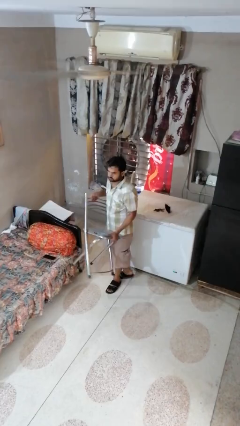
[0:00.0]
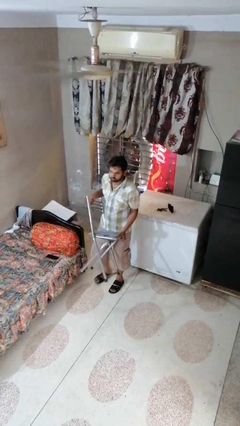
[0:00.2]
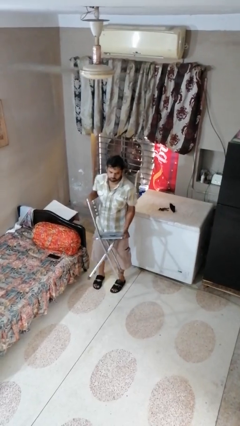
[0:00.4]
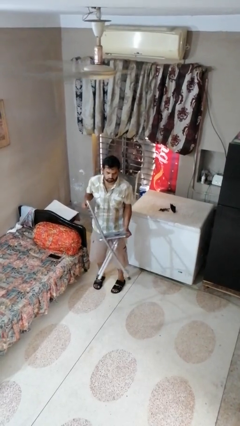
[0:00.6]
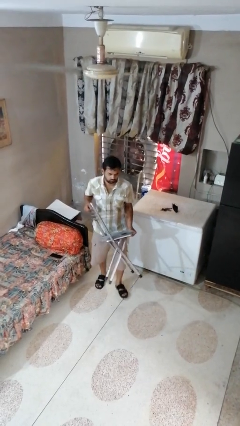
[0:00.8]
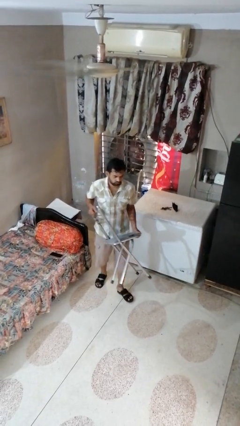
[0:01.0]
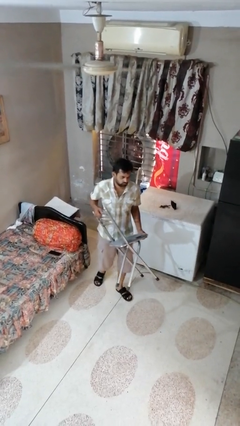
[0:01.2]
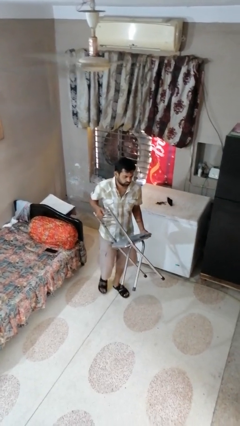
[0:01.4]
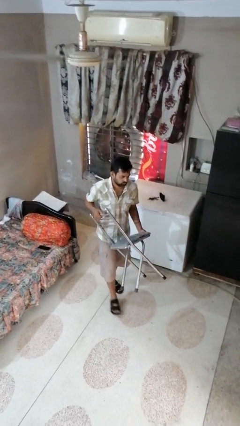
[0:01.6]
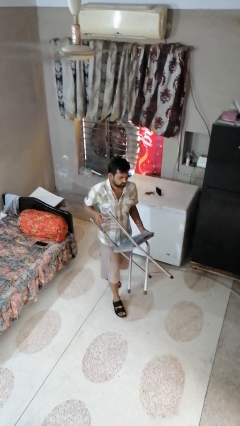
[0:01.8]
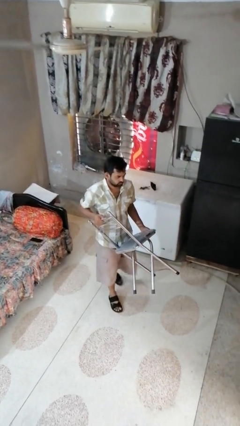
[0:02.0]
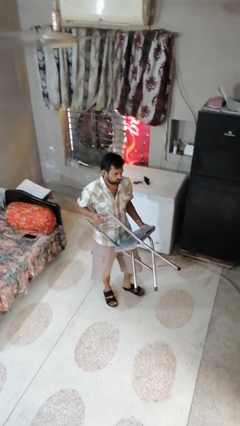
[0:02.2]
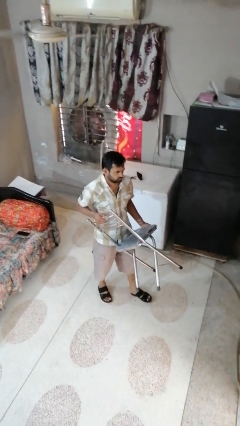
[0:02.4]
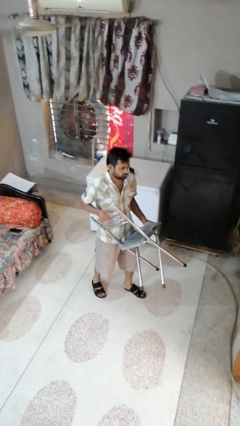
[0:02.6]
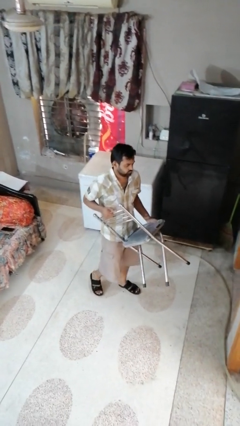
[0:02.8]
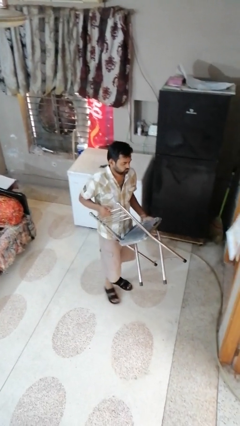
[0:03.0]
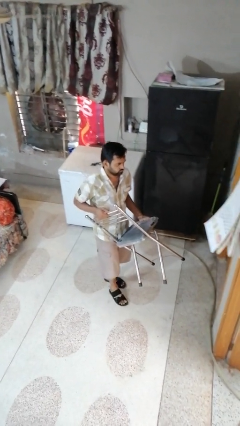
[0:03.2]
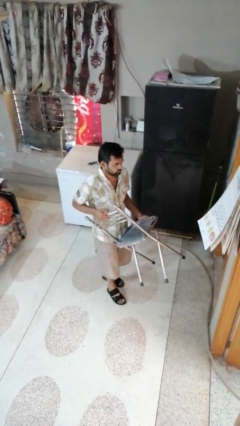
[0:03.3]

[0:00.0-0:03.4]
person carries furniture

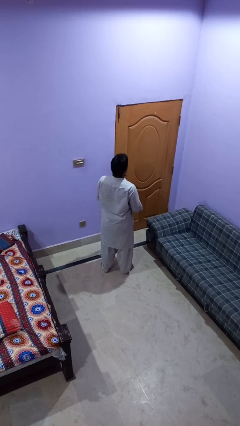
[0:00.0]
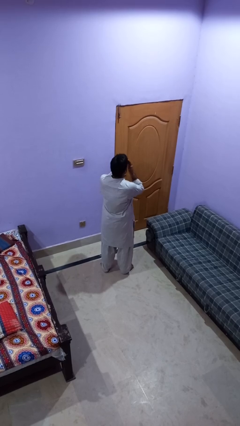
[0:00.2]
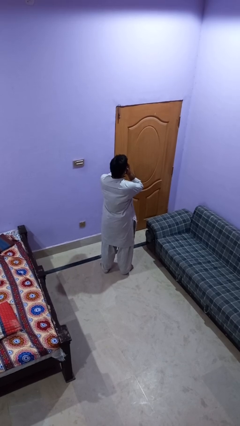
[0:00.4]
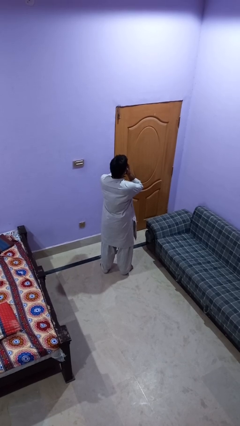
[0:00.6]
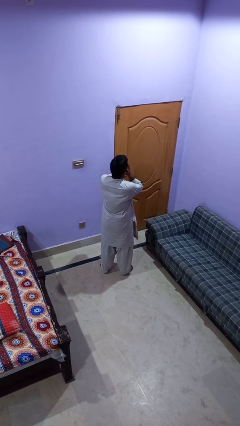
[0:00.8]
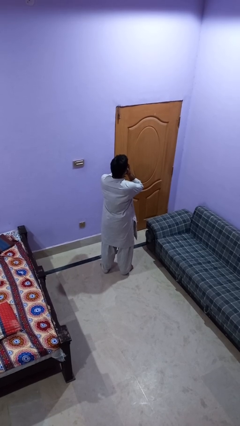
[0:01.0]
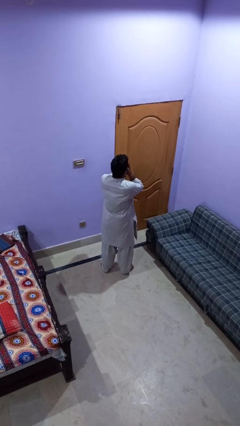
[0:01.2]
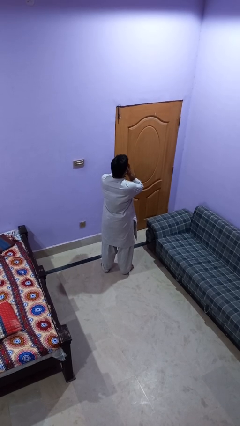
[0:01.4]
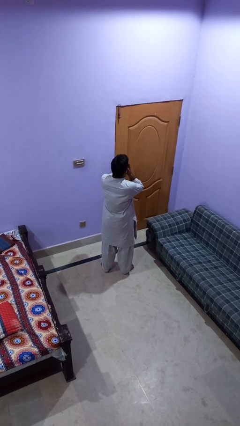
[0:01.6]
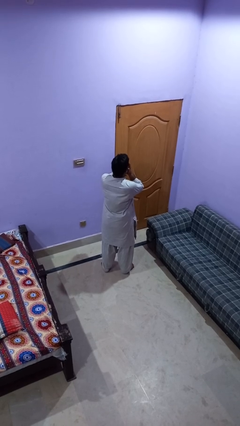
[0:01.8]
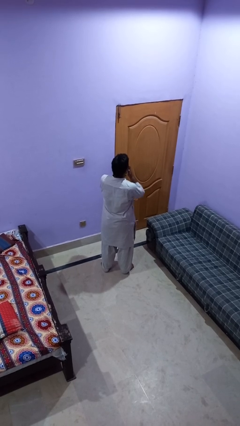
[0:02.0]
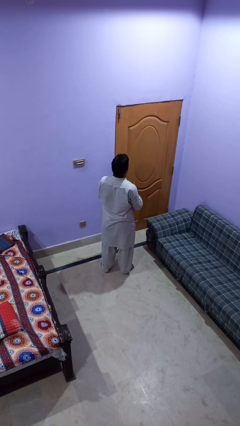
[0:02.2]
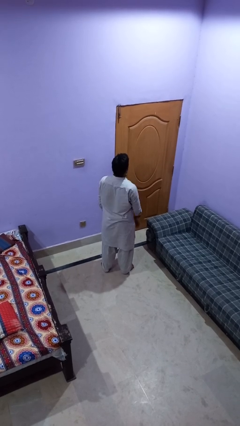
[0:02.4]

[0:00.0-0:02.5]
person covers face with hands

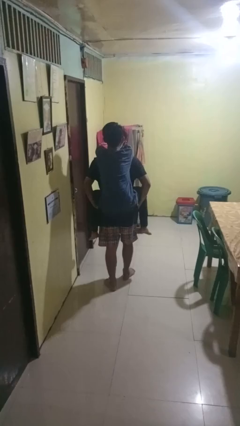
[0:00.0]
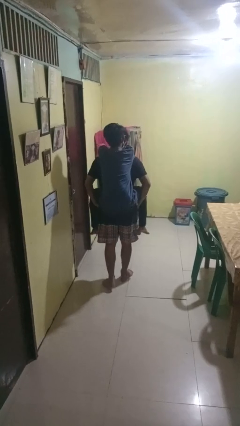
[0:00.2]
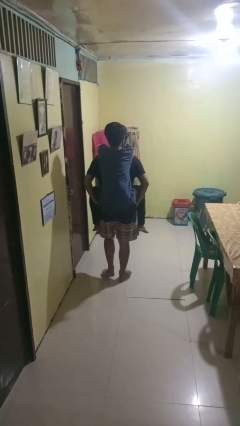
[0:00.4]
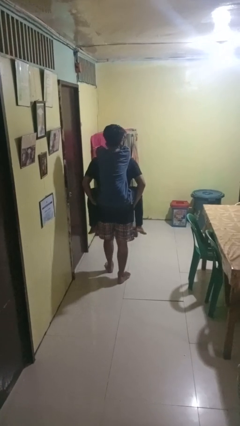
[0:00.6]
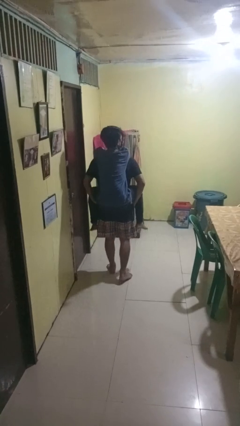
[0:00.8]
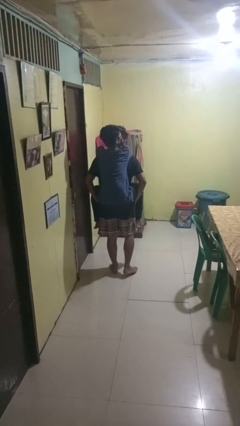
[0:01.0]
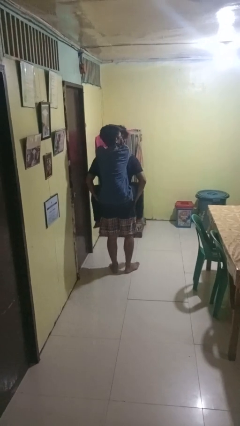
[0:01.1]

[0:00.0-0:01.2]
person carries person on back

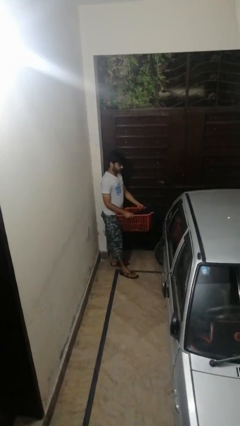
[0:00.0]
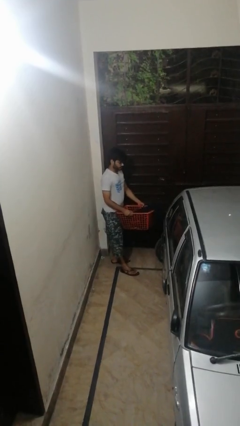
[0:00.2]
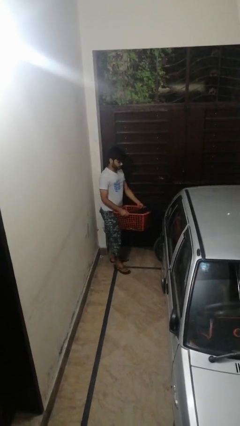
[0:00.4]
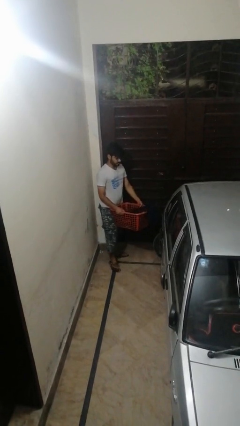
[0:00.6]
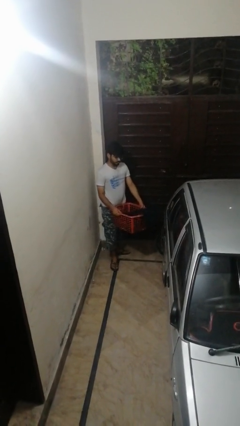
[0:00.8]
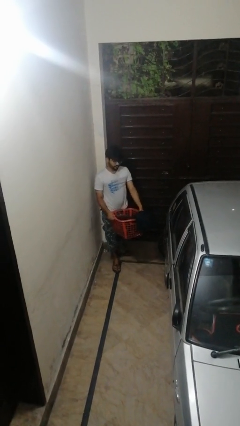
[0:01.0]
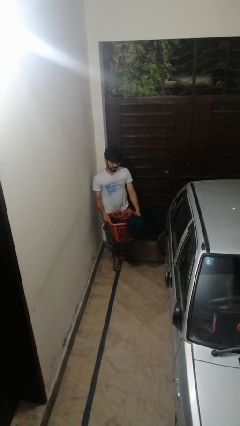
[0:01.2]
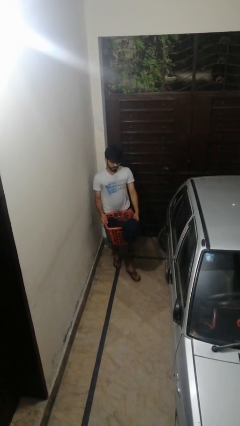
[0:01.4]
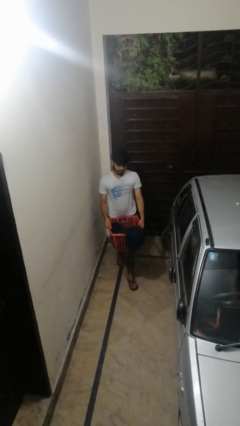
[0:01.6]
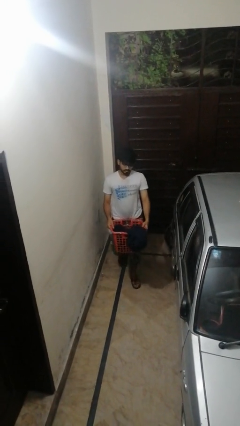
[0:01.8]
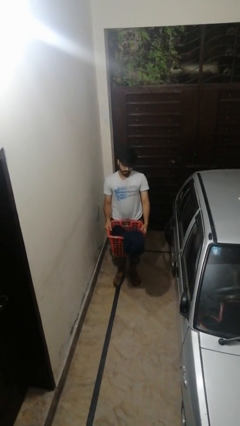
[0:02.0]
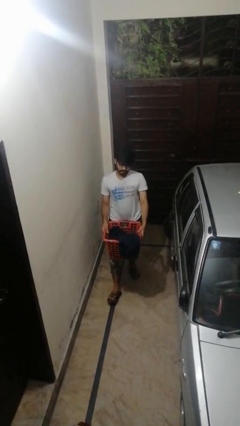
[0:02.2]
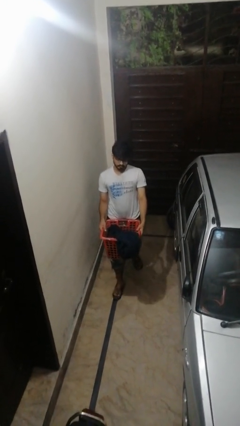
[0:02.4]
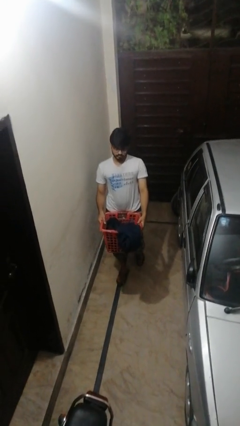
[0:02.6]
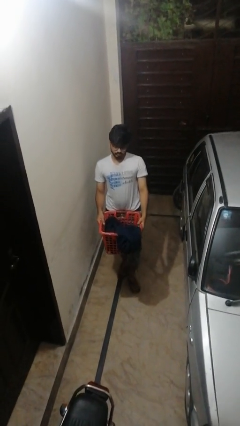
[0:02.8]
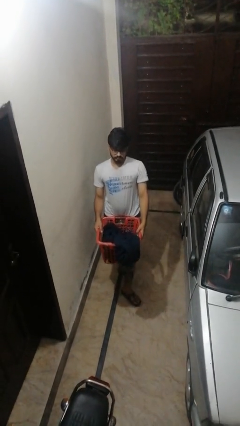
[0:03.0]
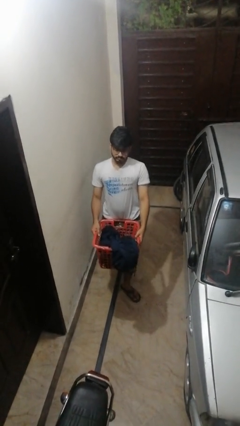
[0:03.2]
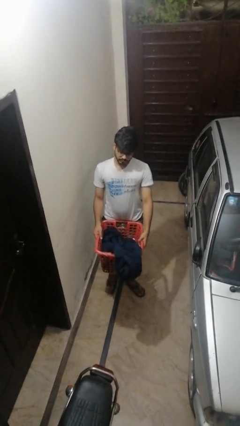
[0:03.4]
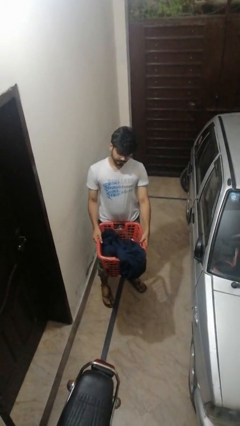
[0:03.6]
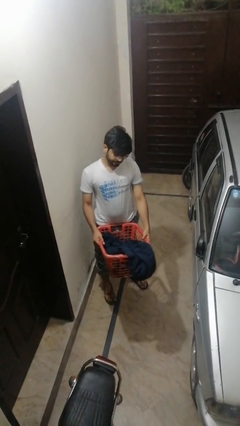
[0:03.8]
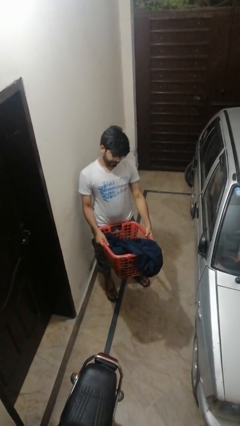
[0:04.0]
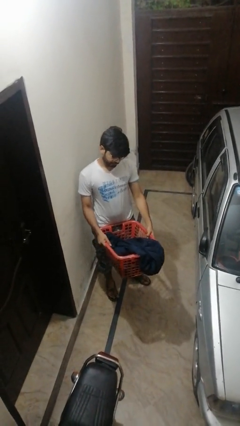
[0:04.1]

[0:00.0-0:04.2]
person carries laundry basket

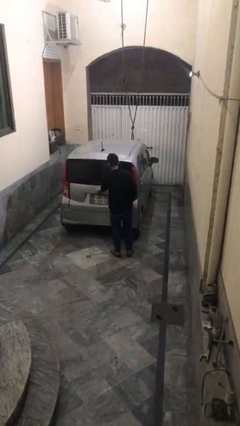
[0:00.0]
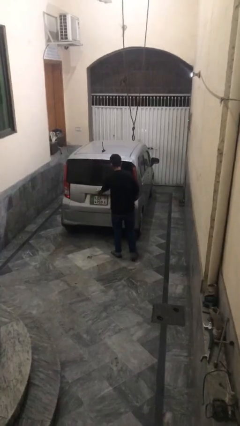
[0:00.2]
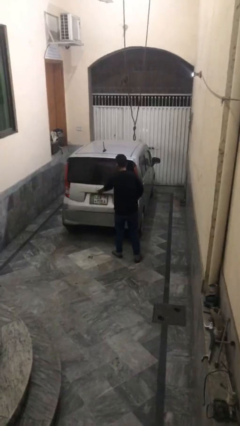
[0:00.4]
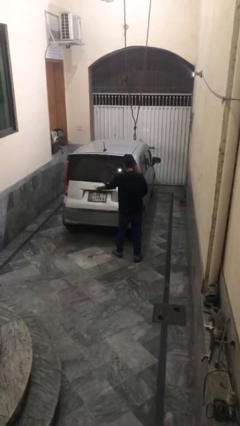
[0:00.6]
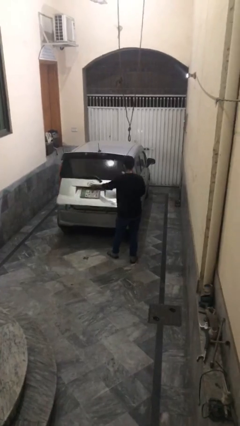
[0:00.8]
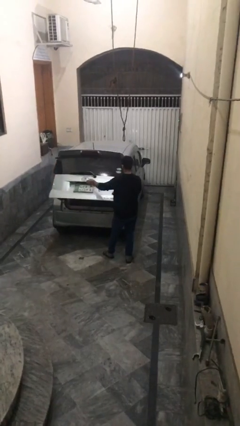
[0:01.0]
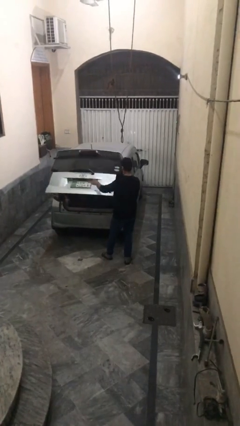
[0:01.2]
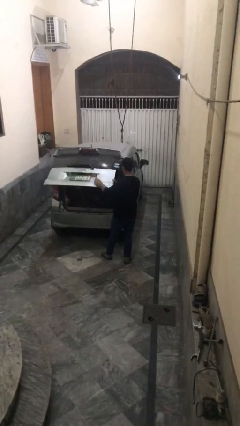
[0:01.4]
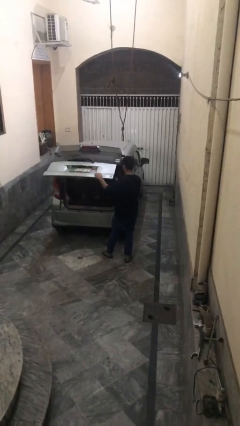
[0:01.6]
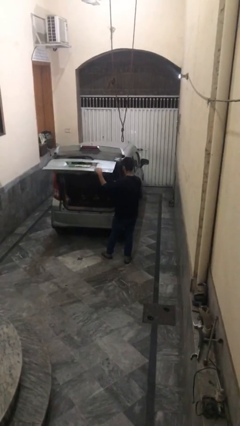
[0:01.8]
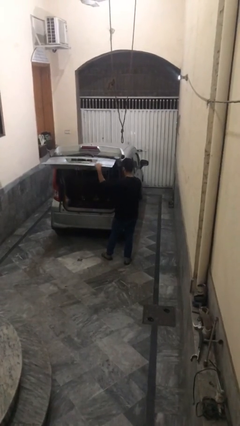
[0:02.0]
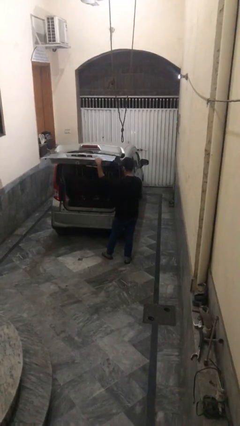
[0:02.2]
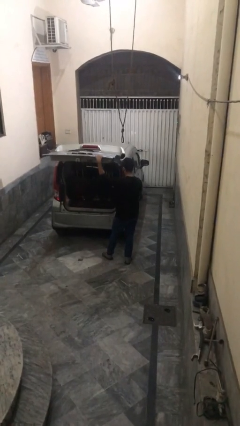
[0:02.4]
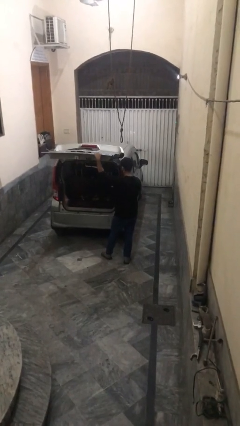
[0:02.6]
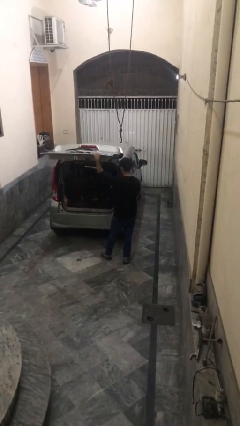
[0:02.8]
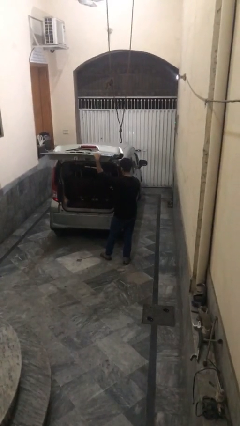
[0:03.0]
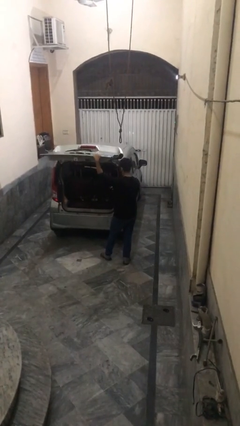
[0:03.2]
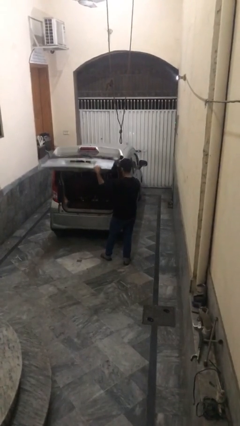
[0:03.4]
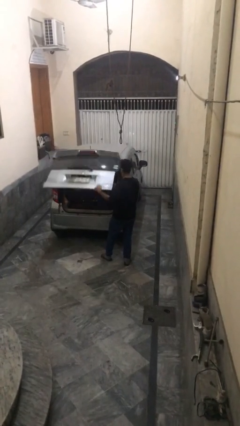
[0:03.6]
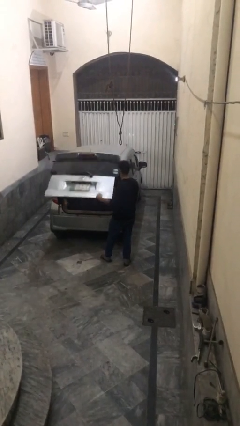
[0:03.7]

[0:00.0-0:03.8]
person opens car trunk

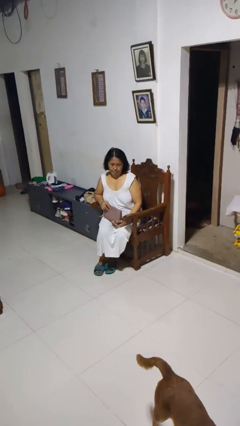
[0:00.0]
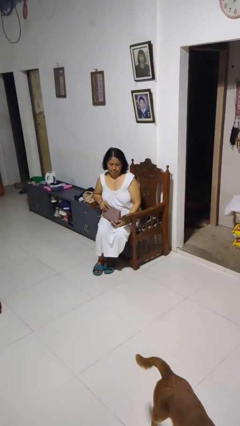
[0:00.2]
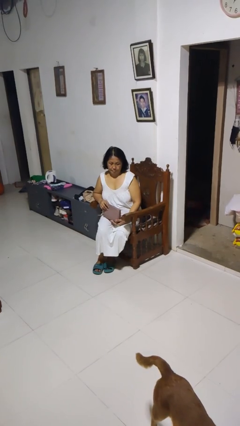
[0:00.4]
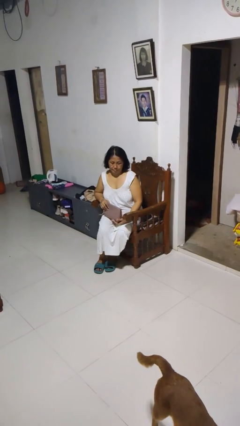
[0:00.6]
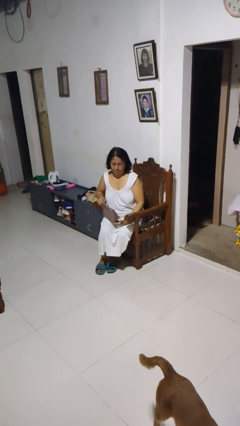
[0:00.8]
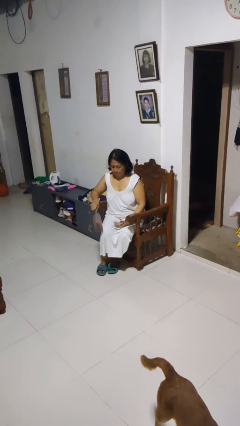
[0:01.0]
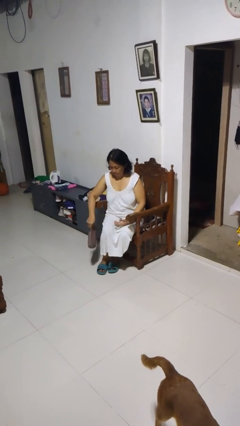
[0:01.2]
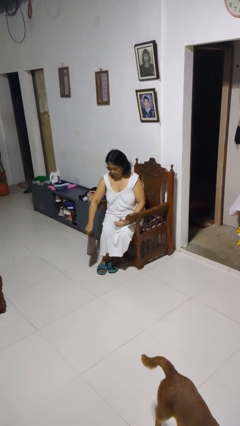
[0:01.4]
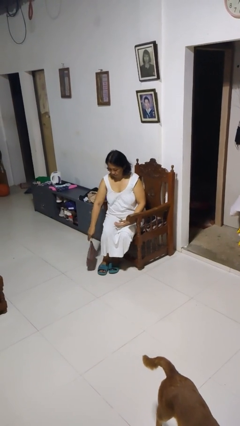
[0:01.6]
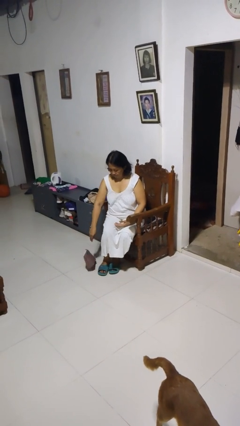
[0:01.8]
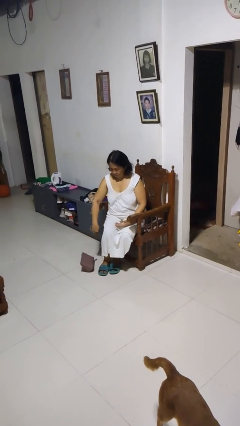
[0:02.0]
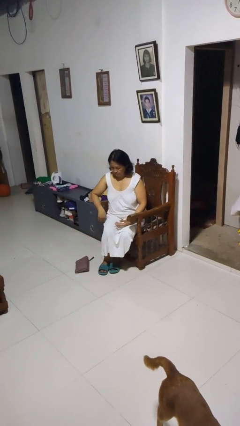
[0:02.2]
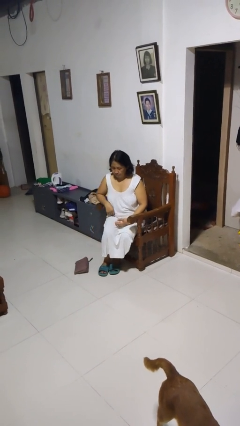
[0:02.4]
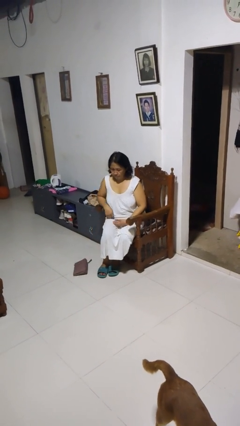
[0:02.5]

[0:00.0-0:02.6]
person drops object
